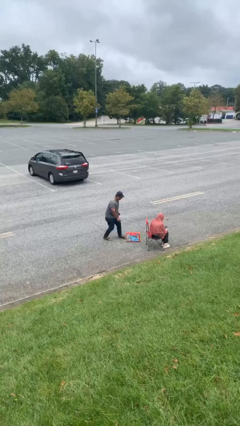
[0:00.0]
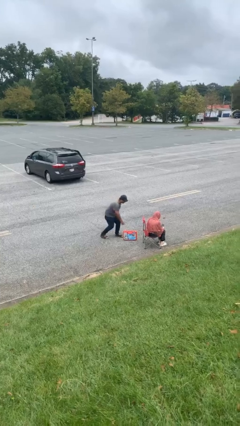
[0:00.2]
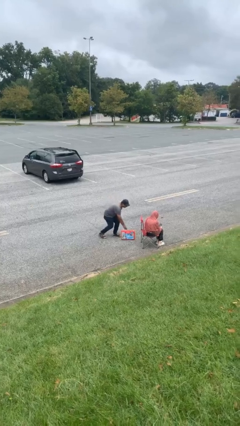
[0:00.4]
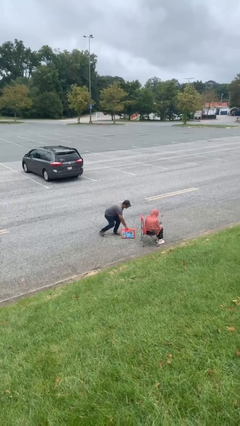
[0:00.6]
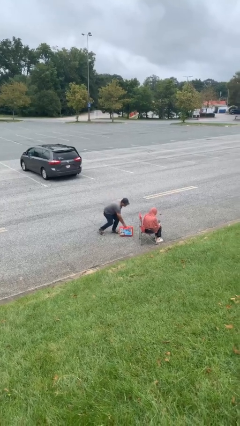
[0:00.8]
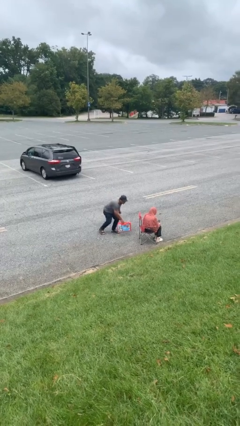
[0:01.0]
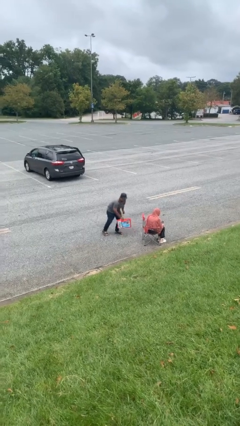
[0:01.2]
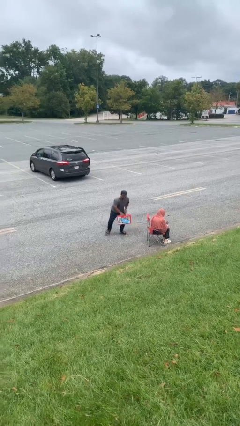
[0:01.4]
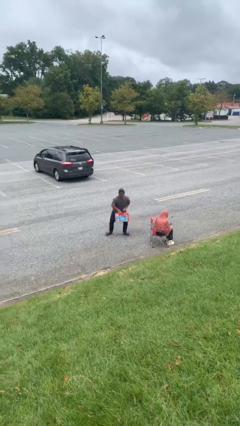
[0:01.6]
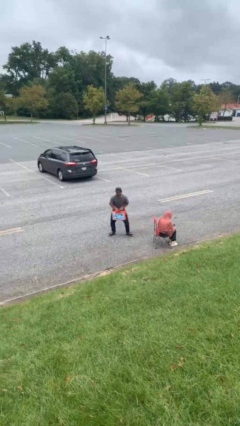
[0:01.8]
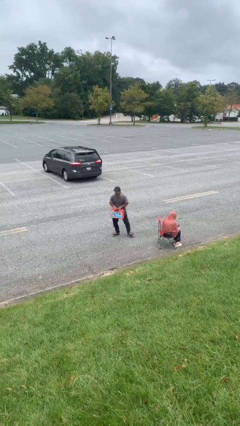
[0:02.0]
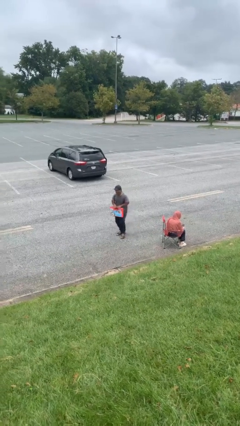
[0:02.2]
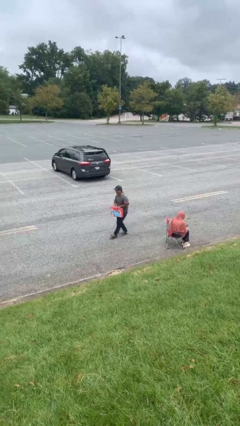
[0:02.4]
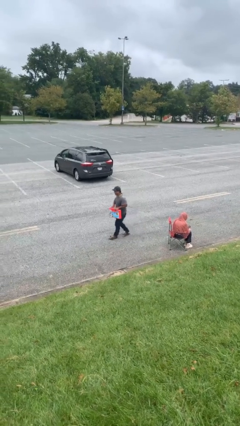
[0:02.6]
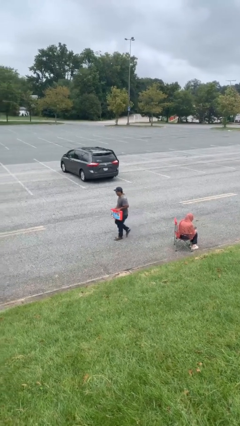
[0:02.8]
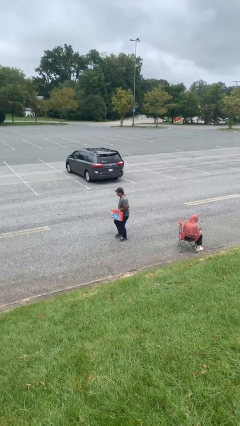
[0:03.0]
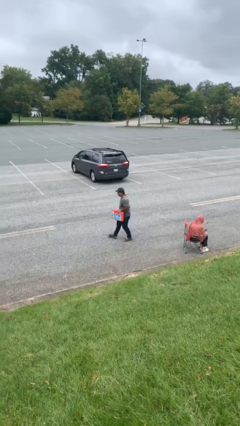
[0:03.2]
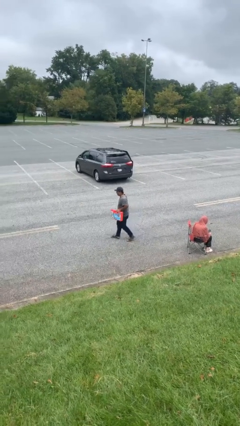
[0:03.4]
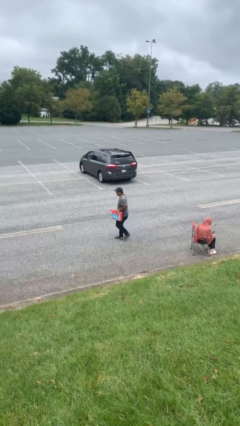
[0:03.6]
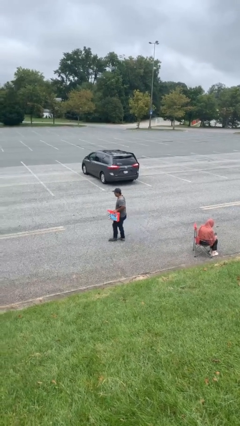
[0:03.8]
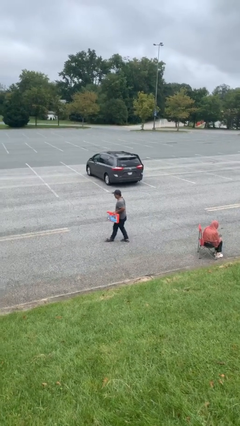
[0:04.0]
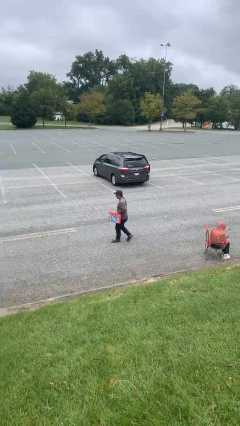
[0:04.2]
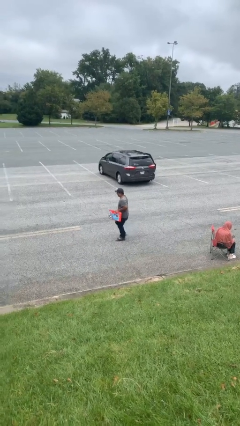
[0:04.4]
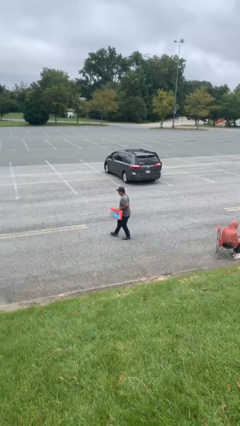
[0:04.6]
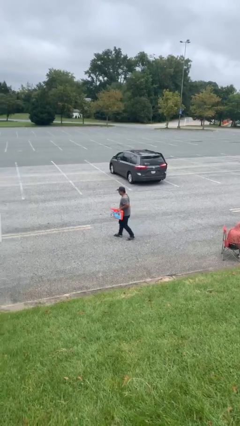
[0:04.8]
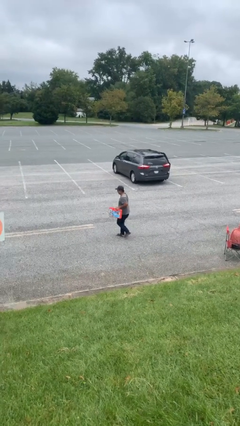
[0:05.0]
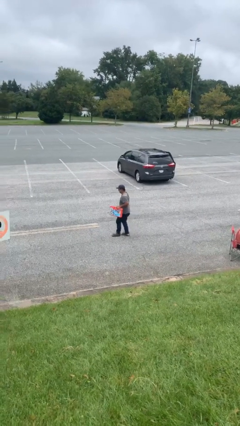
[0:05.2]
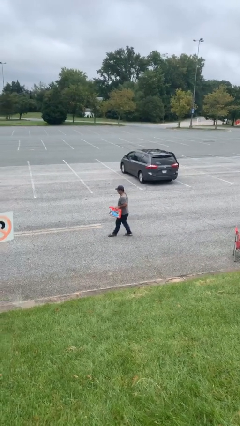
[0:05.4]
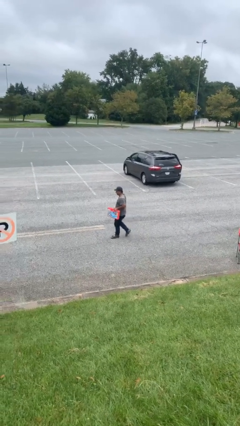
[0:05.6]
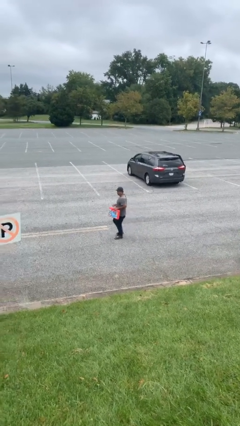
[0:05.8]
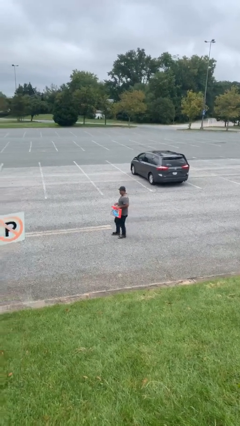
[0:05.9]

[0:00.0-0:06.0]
person steals object from person

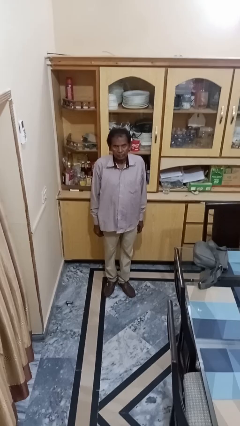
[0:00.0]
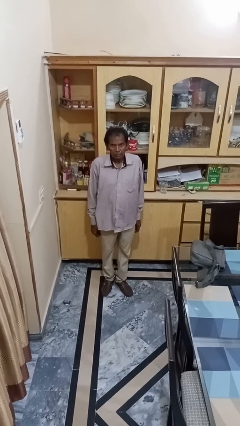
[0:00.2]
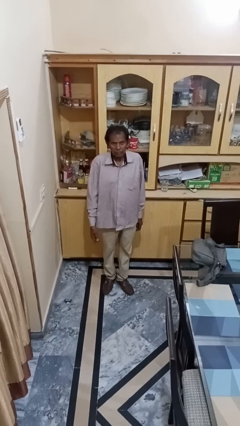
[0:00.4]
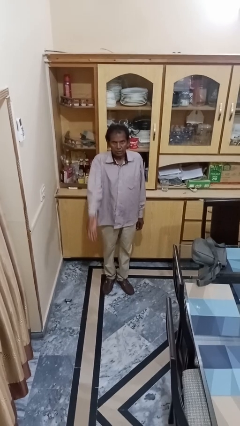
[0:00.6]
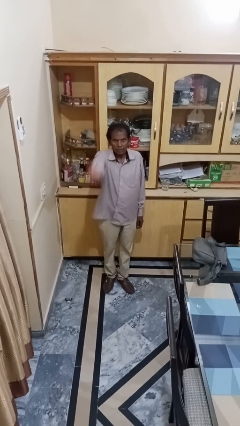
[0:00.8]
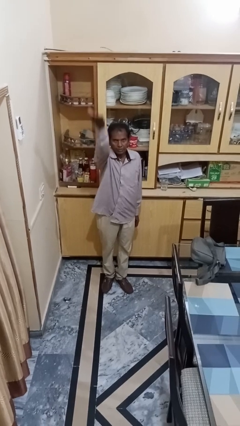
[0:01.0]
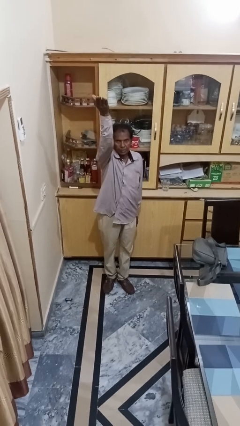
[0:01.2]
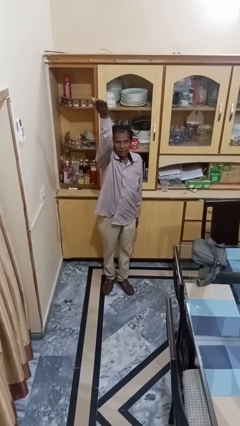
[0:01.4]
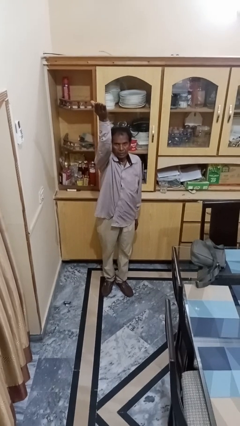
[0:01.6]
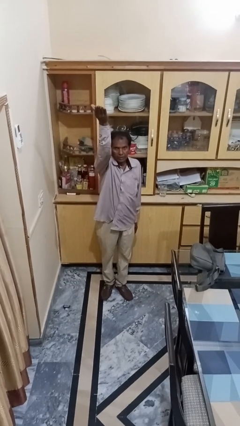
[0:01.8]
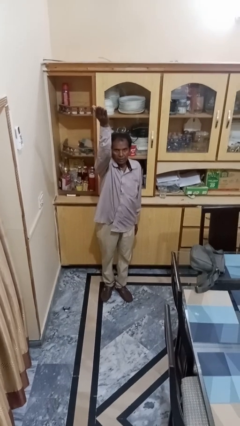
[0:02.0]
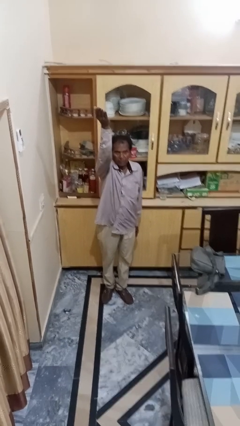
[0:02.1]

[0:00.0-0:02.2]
person gestures swipe up

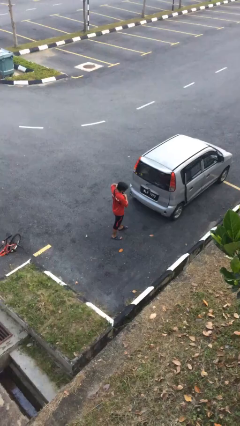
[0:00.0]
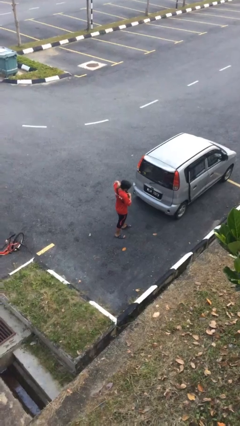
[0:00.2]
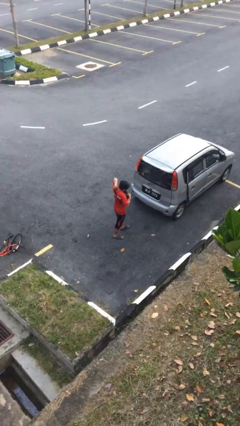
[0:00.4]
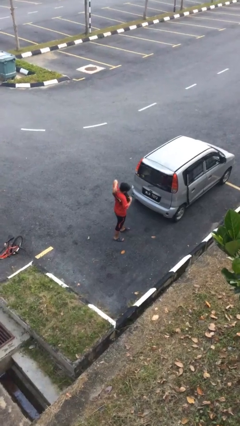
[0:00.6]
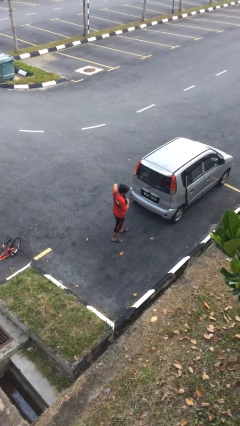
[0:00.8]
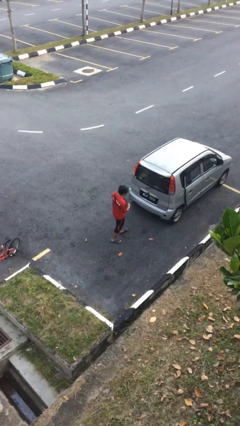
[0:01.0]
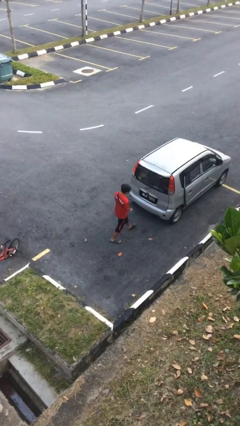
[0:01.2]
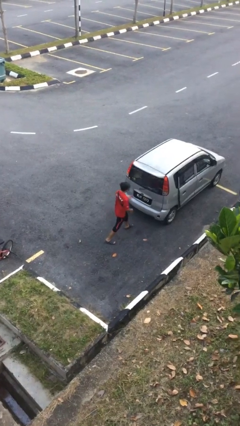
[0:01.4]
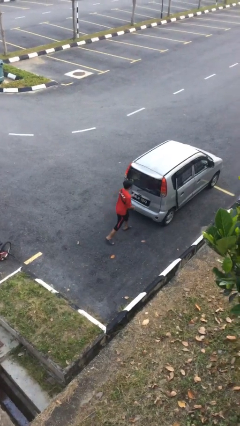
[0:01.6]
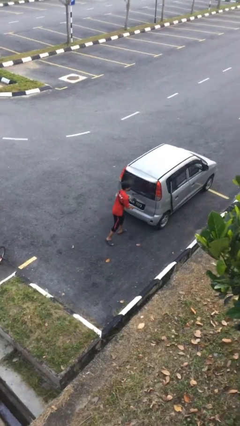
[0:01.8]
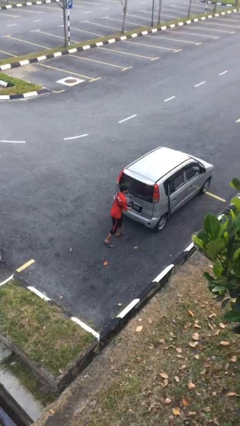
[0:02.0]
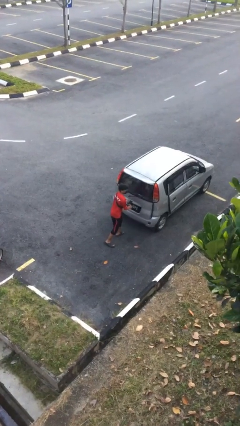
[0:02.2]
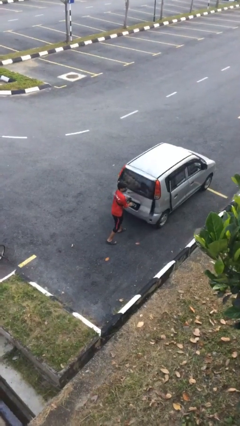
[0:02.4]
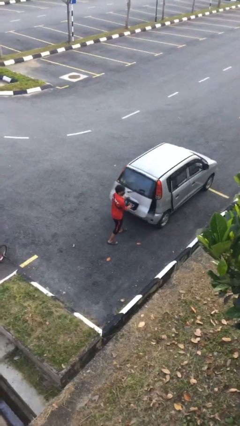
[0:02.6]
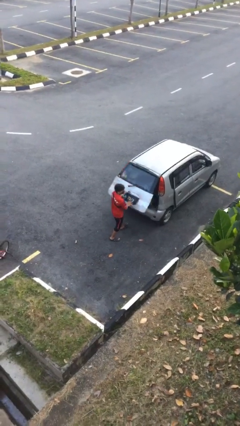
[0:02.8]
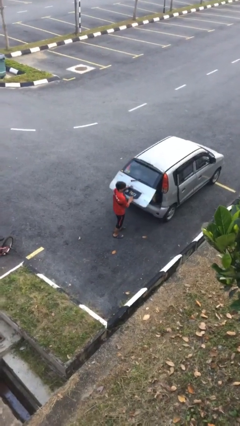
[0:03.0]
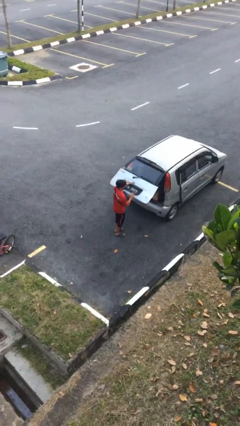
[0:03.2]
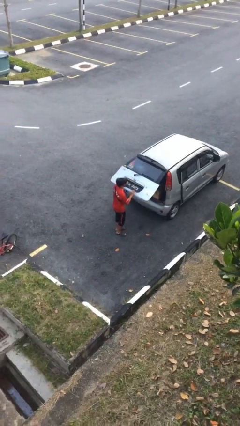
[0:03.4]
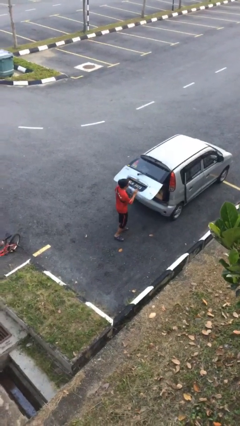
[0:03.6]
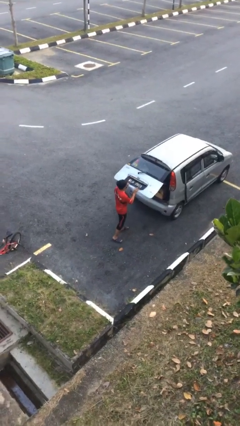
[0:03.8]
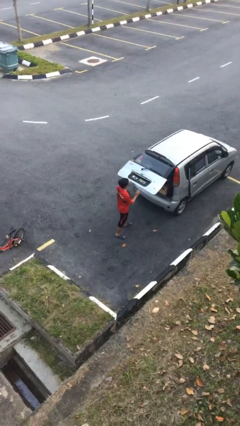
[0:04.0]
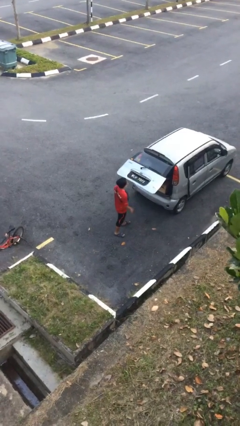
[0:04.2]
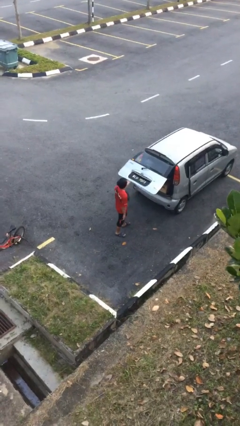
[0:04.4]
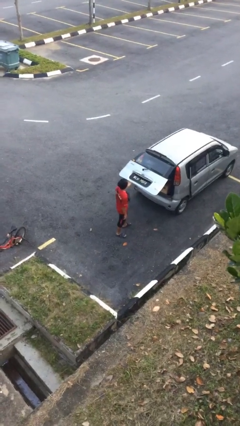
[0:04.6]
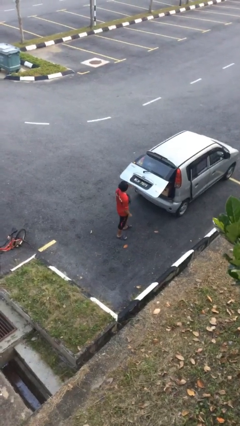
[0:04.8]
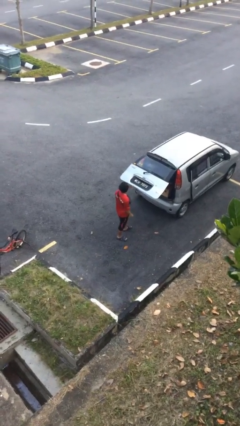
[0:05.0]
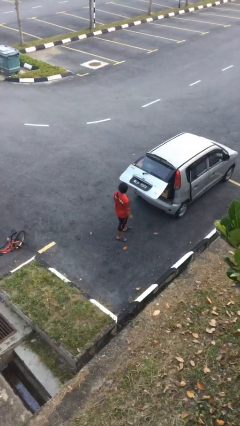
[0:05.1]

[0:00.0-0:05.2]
person opens car trunk

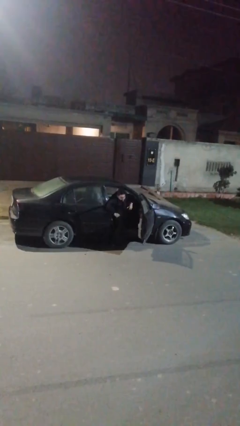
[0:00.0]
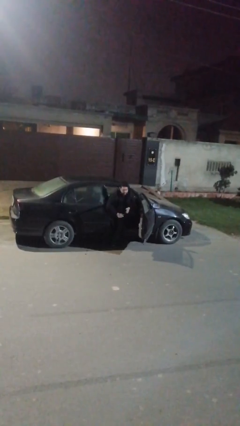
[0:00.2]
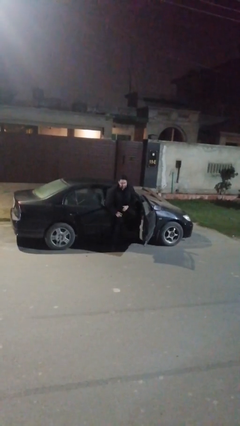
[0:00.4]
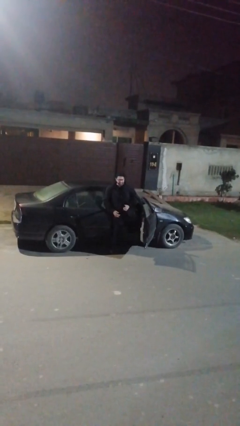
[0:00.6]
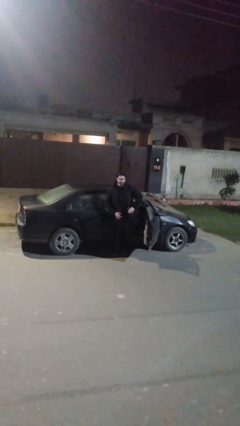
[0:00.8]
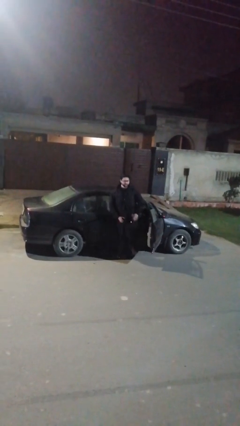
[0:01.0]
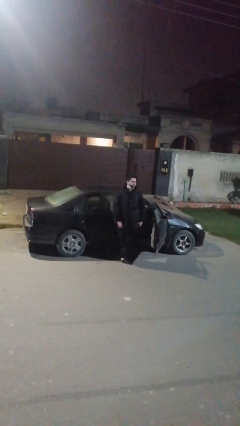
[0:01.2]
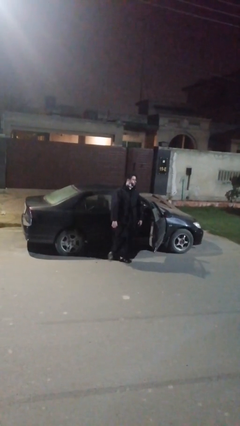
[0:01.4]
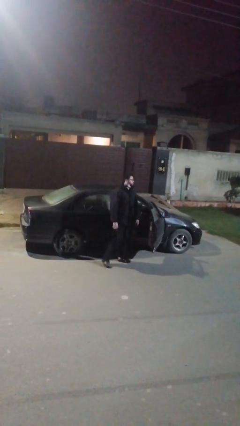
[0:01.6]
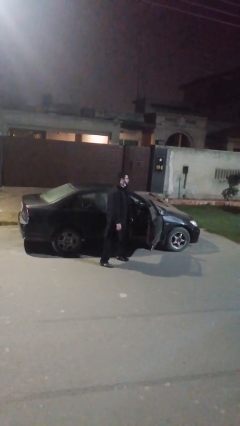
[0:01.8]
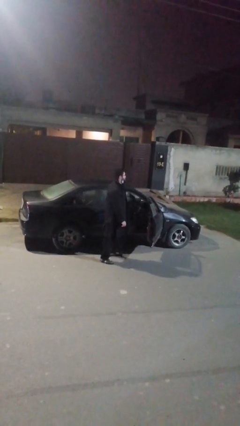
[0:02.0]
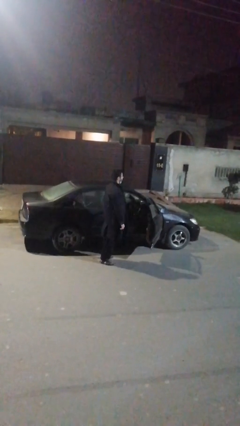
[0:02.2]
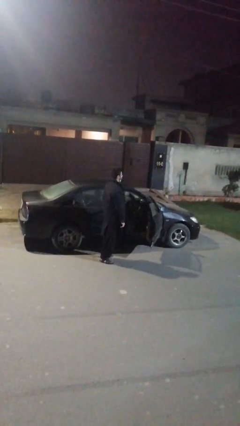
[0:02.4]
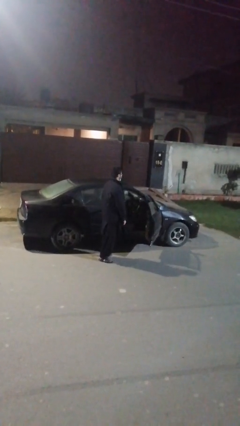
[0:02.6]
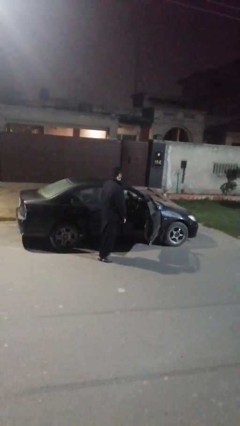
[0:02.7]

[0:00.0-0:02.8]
person exits car

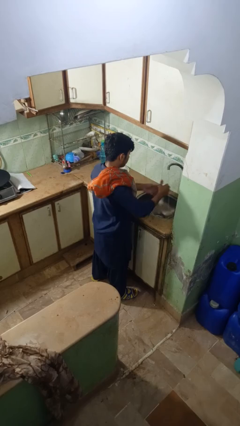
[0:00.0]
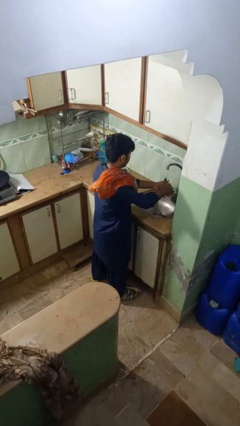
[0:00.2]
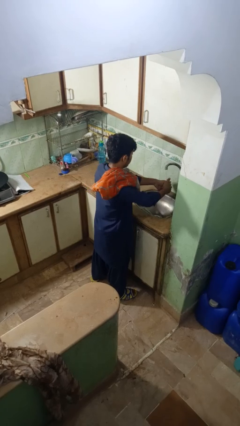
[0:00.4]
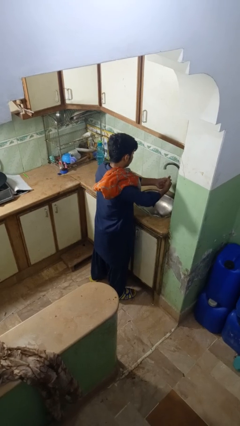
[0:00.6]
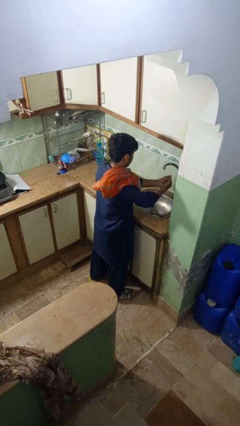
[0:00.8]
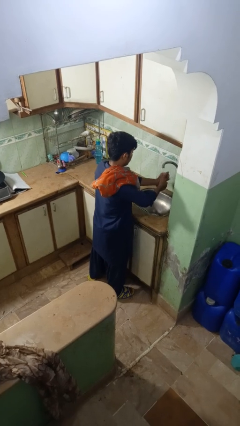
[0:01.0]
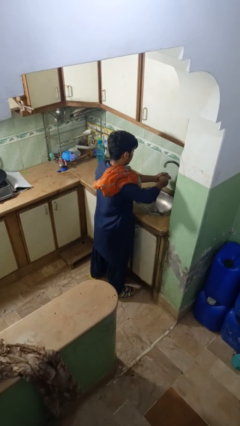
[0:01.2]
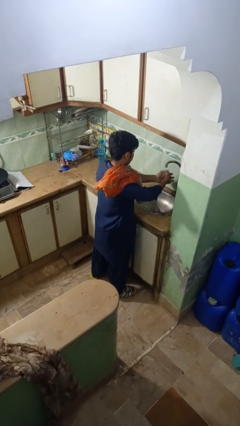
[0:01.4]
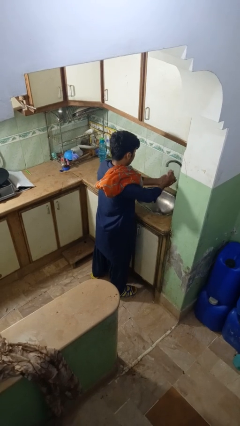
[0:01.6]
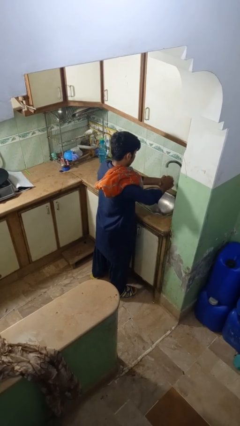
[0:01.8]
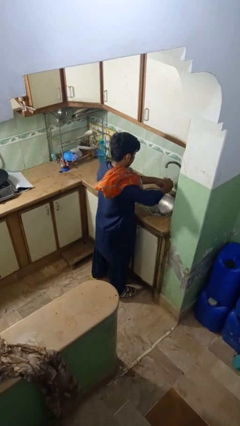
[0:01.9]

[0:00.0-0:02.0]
person washes hands
